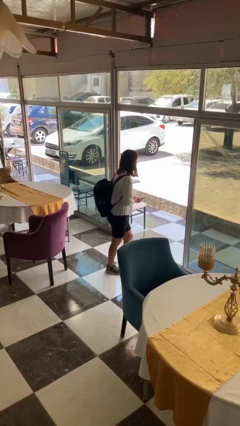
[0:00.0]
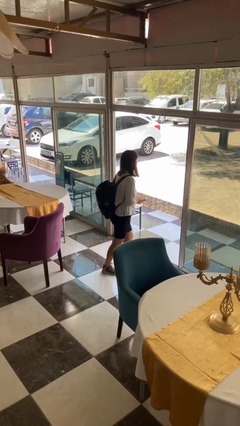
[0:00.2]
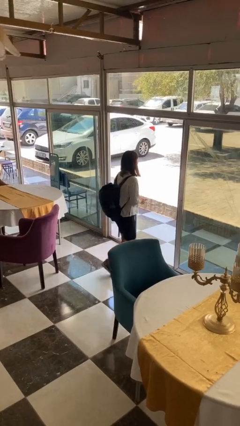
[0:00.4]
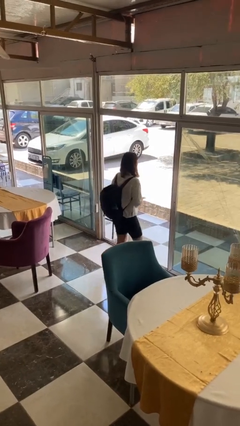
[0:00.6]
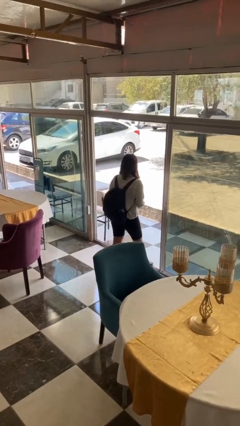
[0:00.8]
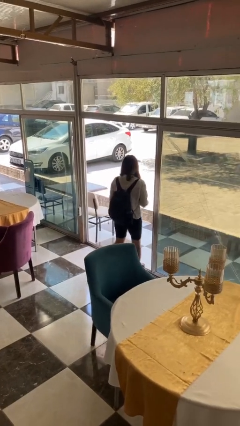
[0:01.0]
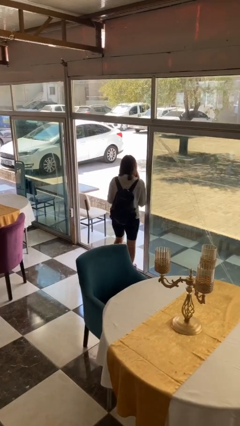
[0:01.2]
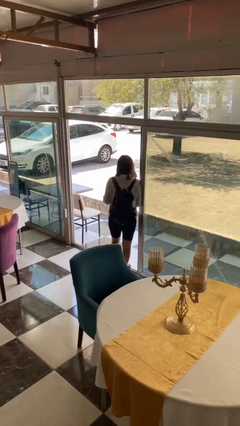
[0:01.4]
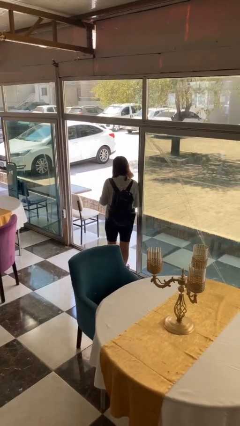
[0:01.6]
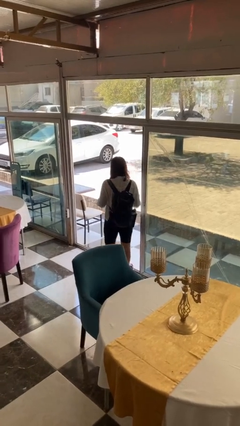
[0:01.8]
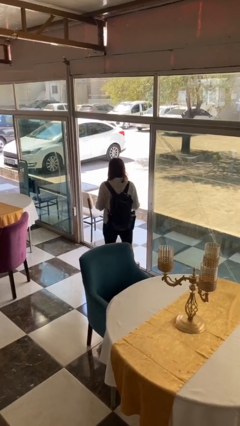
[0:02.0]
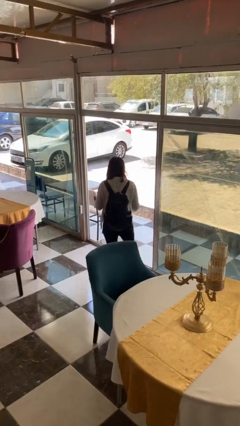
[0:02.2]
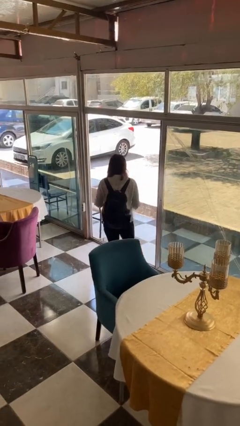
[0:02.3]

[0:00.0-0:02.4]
person bumps into wall

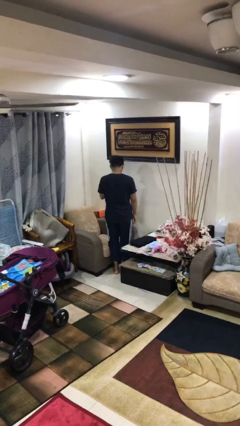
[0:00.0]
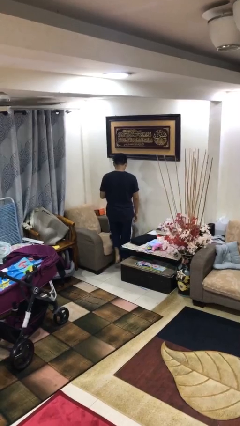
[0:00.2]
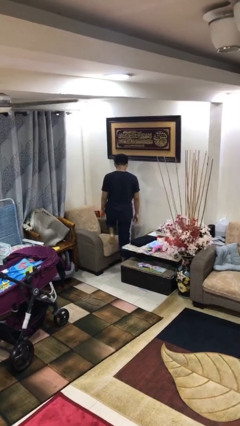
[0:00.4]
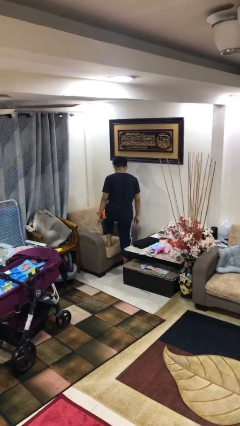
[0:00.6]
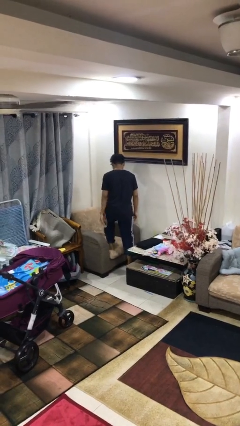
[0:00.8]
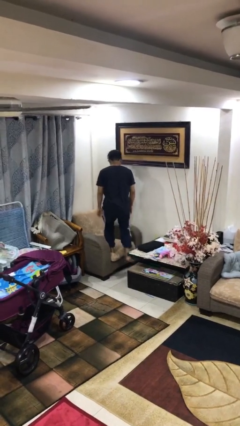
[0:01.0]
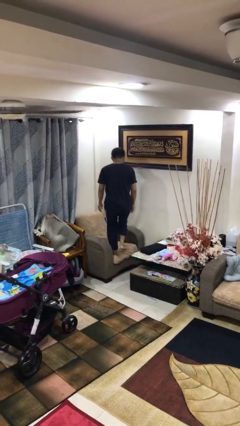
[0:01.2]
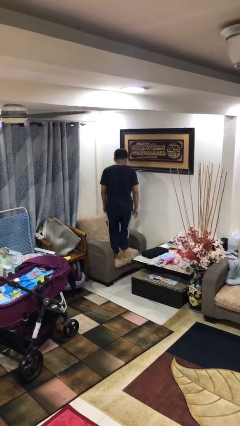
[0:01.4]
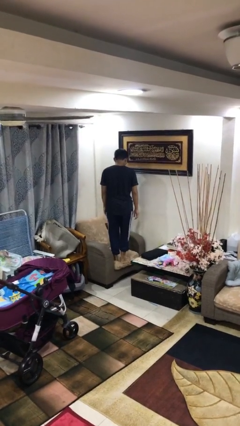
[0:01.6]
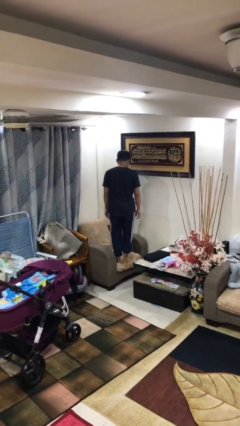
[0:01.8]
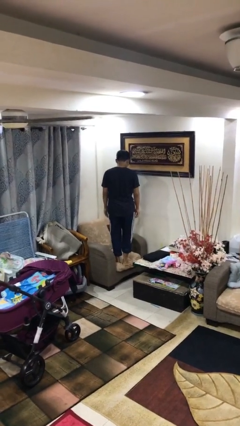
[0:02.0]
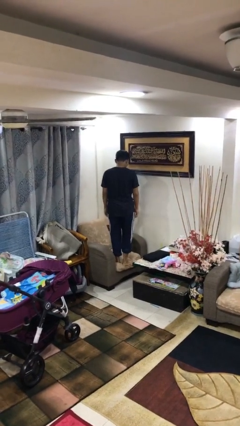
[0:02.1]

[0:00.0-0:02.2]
person climbs on couch

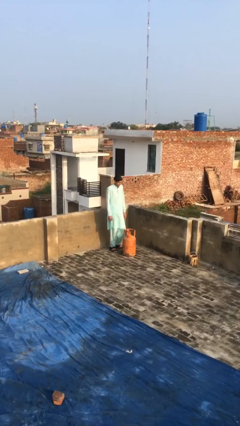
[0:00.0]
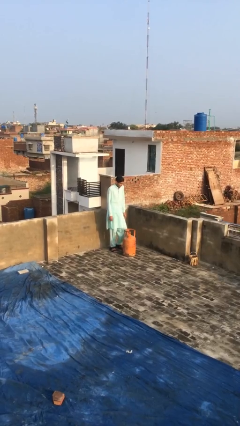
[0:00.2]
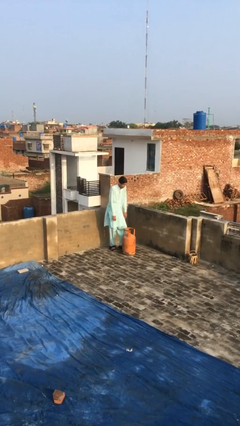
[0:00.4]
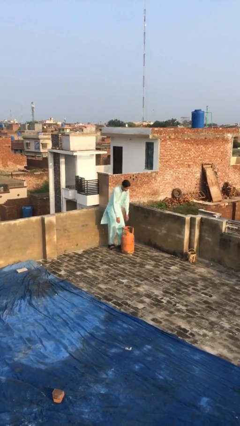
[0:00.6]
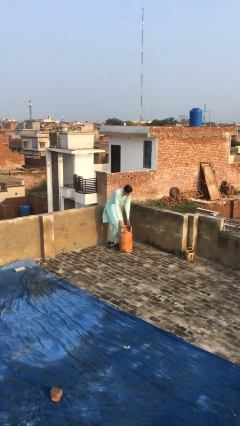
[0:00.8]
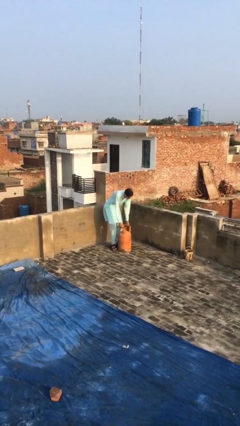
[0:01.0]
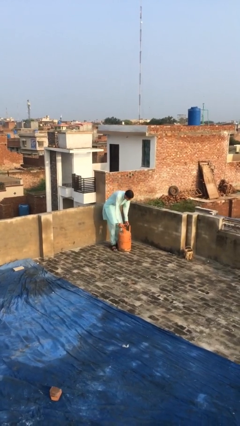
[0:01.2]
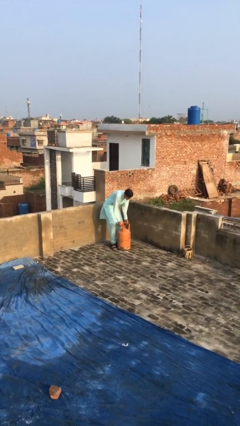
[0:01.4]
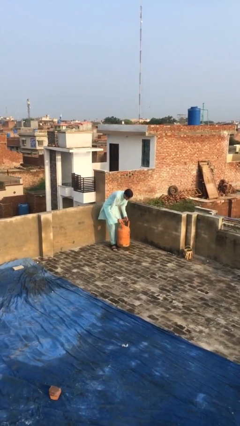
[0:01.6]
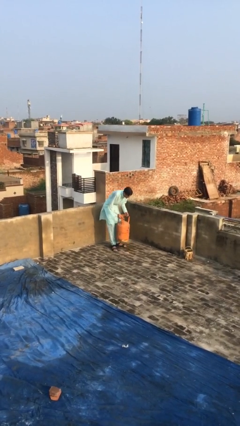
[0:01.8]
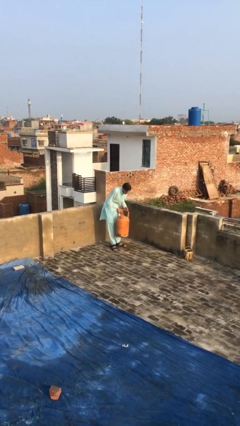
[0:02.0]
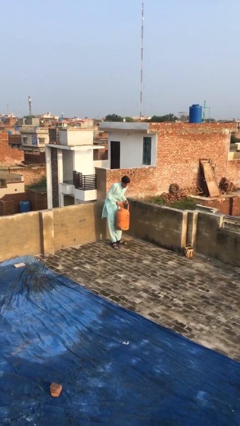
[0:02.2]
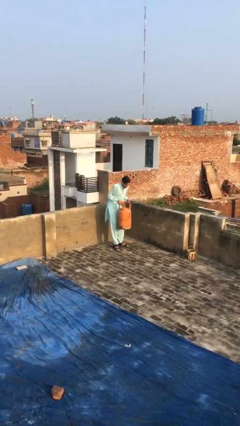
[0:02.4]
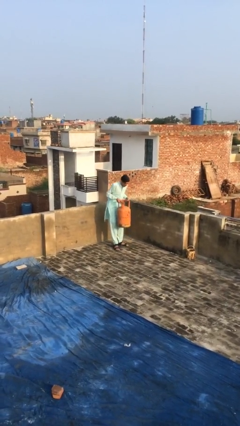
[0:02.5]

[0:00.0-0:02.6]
person picks up object from floor

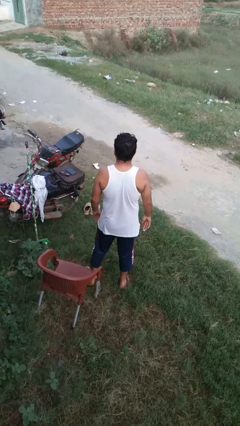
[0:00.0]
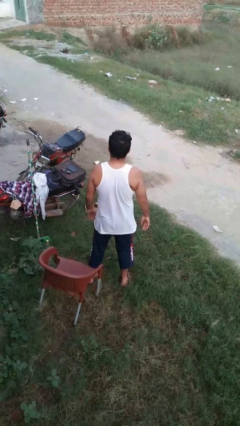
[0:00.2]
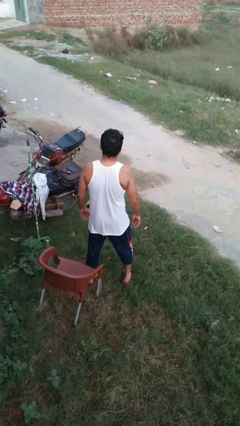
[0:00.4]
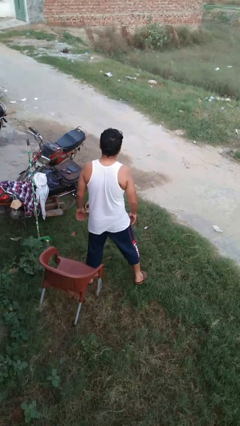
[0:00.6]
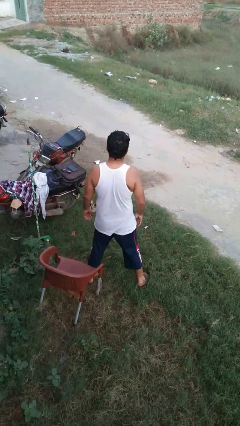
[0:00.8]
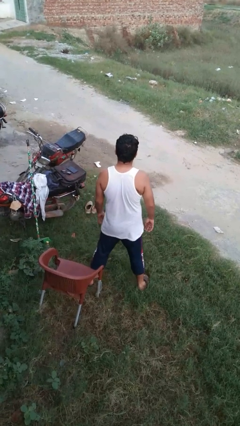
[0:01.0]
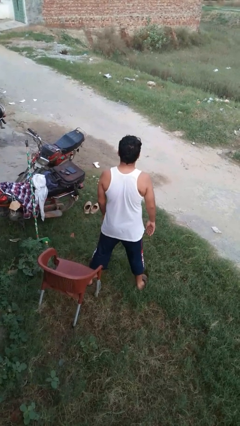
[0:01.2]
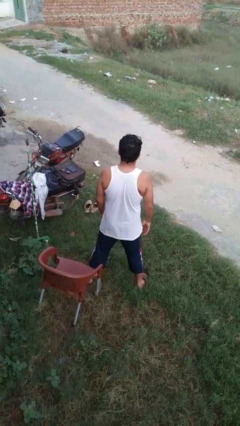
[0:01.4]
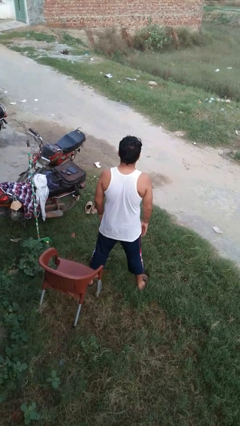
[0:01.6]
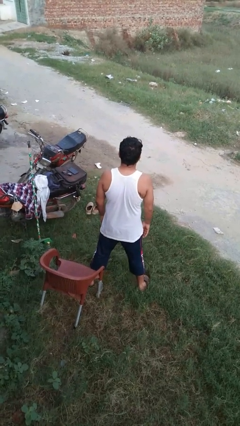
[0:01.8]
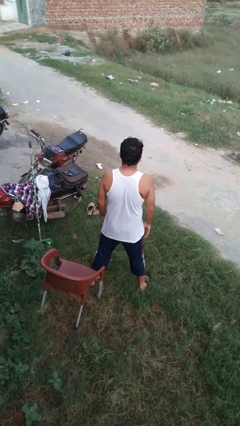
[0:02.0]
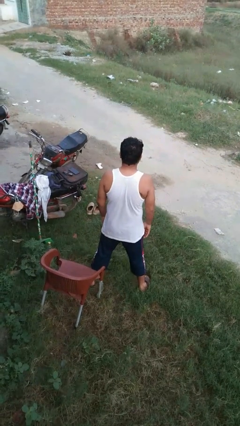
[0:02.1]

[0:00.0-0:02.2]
person stretches back

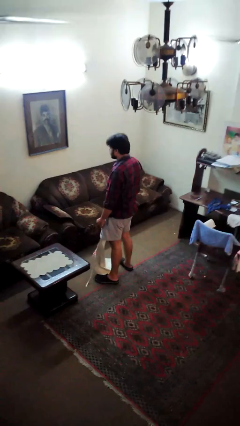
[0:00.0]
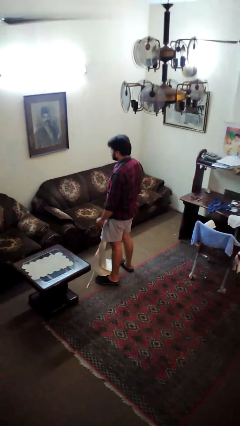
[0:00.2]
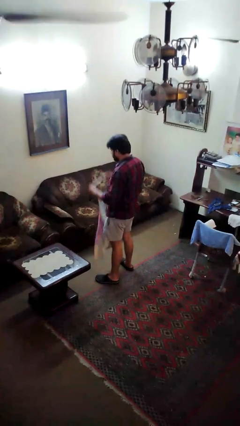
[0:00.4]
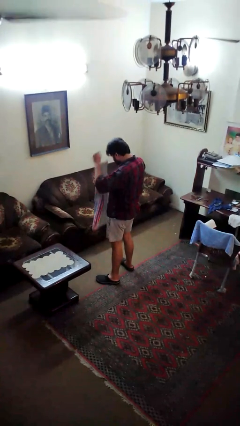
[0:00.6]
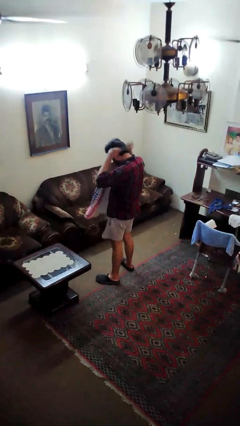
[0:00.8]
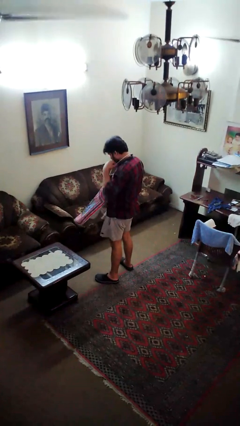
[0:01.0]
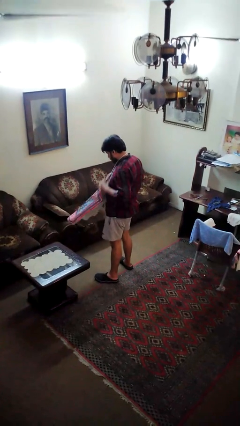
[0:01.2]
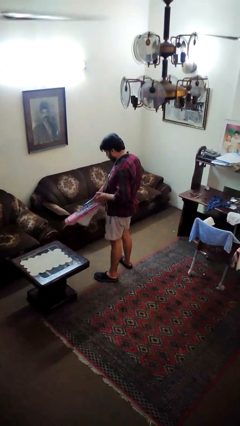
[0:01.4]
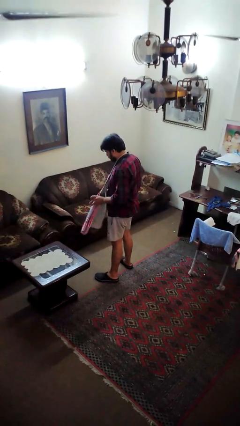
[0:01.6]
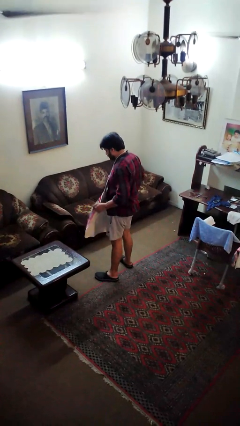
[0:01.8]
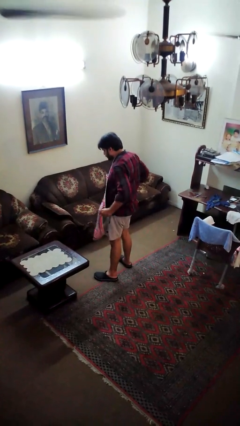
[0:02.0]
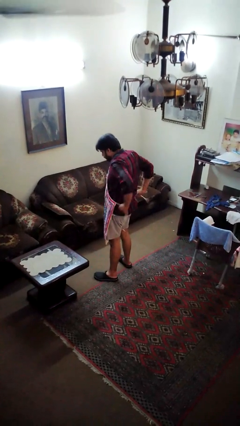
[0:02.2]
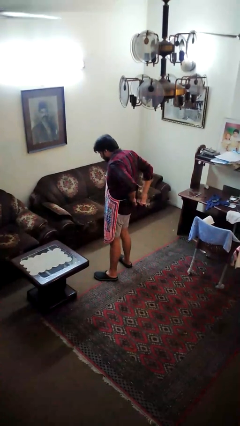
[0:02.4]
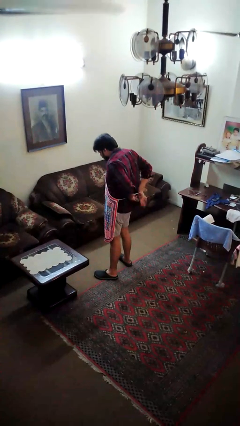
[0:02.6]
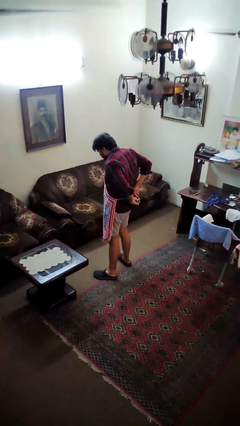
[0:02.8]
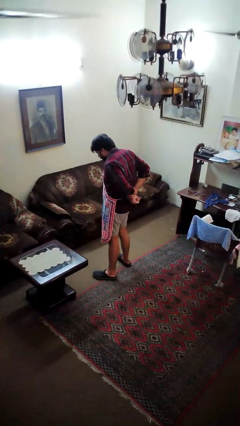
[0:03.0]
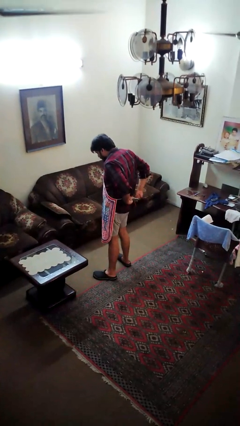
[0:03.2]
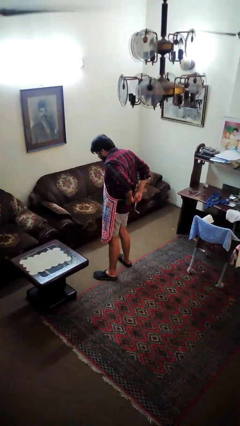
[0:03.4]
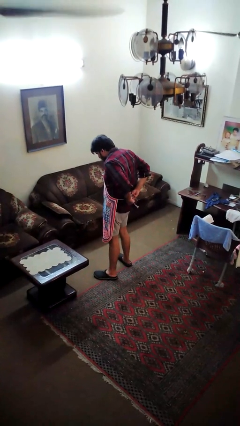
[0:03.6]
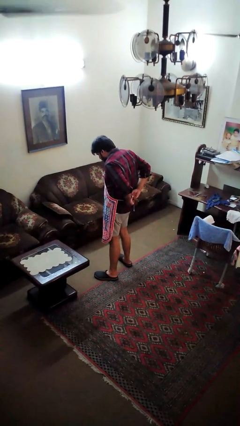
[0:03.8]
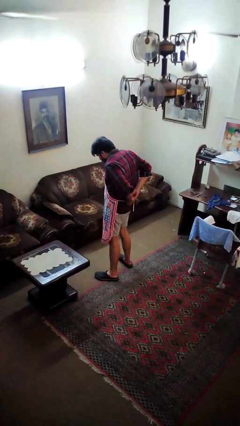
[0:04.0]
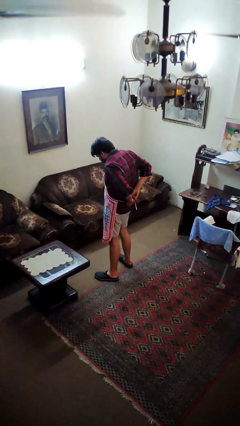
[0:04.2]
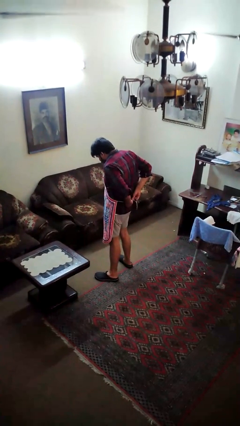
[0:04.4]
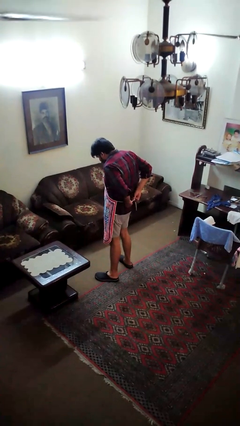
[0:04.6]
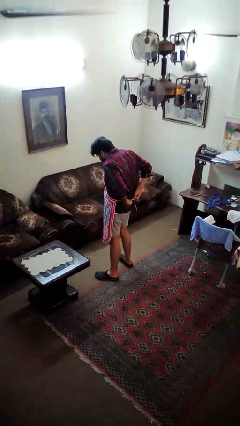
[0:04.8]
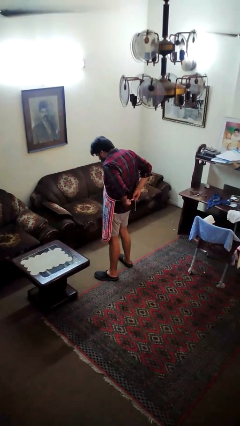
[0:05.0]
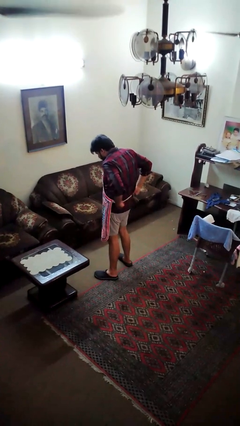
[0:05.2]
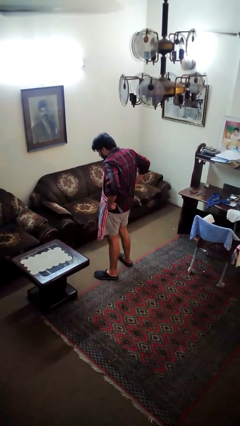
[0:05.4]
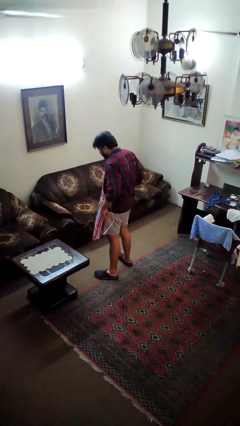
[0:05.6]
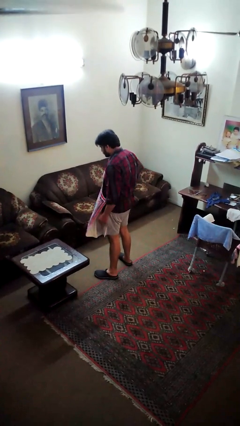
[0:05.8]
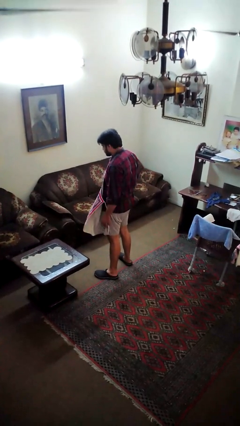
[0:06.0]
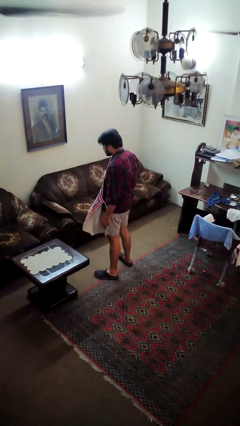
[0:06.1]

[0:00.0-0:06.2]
person puts on apron

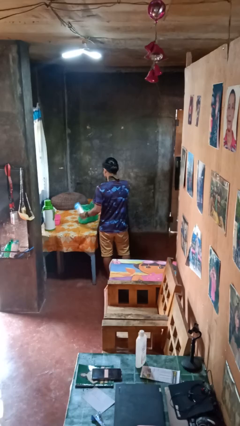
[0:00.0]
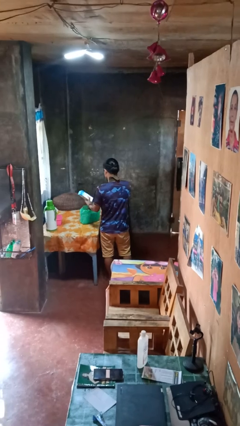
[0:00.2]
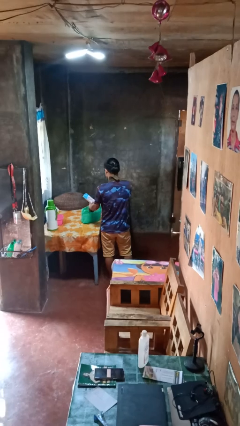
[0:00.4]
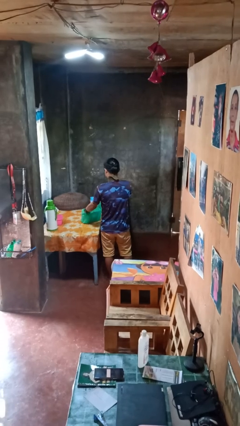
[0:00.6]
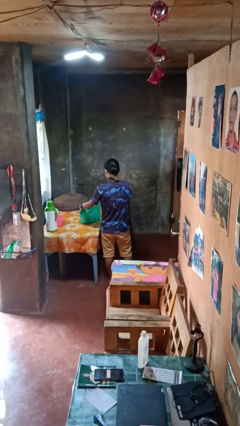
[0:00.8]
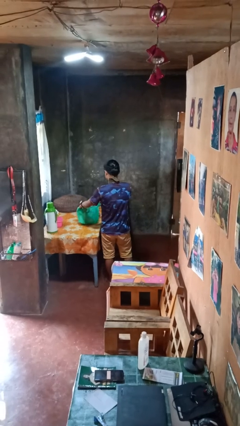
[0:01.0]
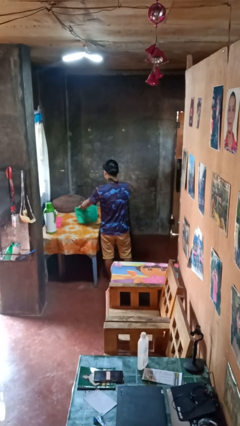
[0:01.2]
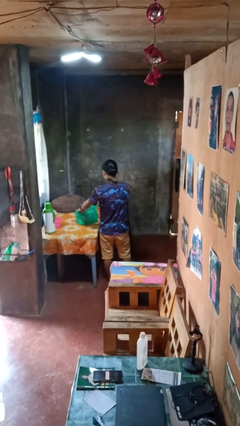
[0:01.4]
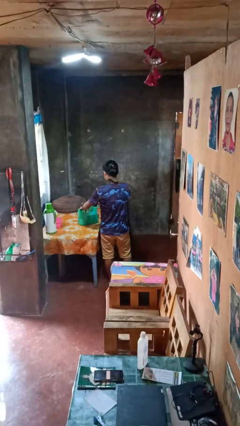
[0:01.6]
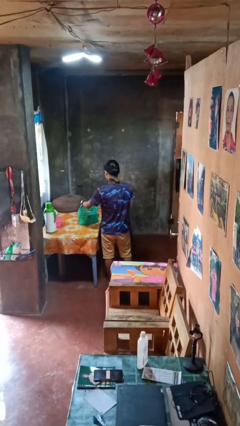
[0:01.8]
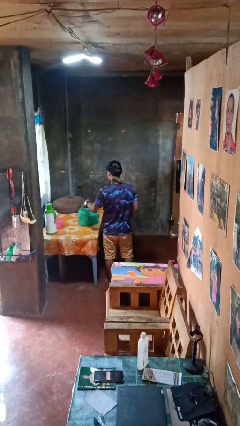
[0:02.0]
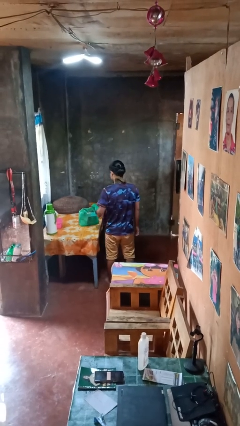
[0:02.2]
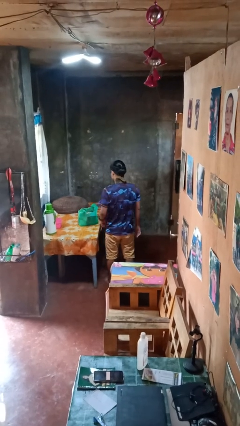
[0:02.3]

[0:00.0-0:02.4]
person puts object into bag
